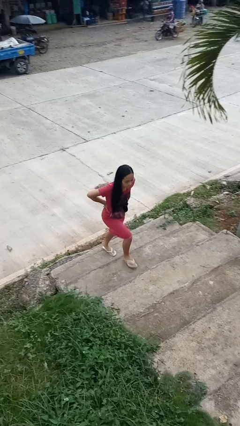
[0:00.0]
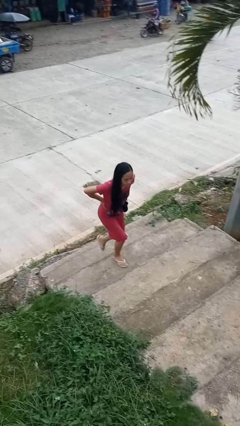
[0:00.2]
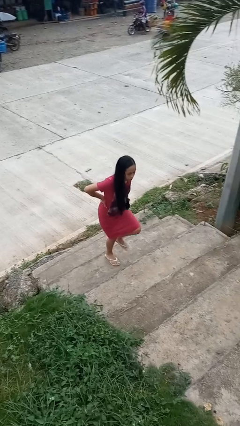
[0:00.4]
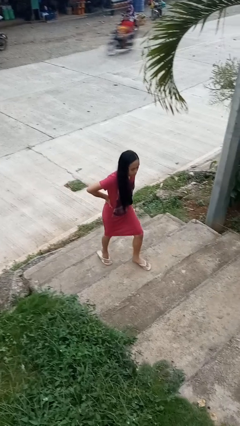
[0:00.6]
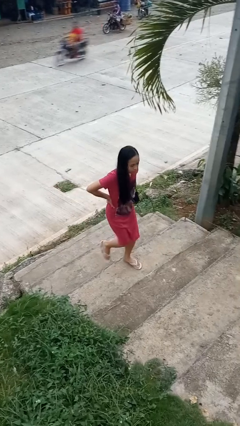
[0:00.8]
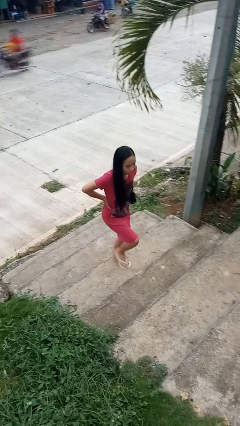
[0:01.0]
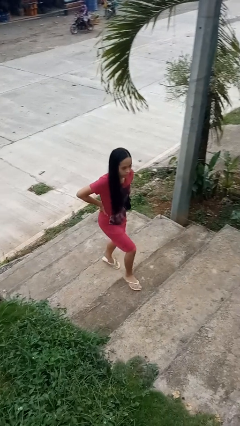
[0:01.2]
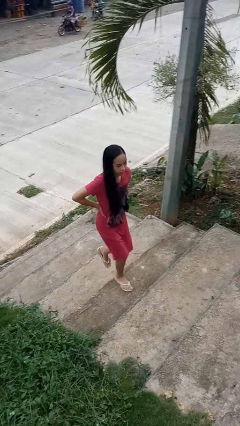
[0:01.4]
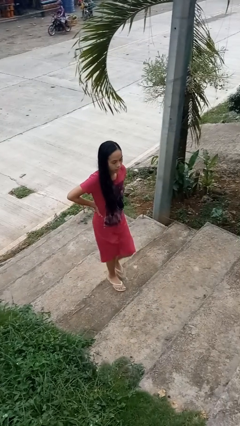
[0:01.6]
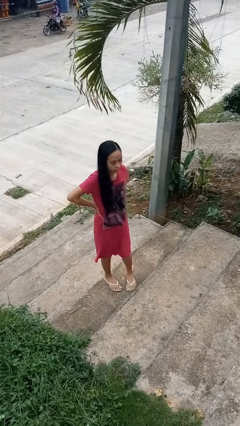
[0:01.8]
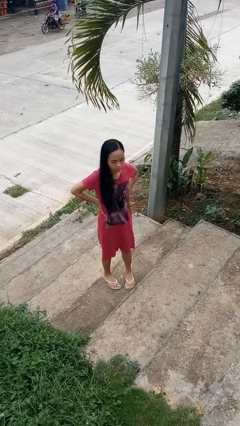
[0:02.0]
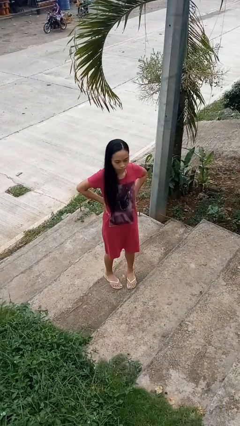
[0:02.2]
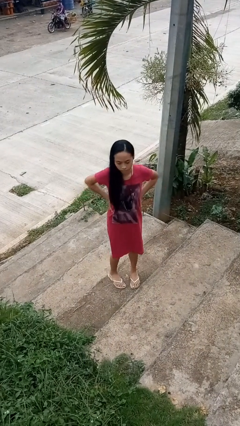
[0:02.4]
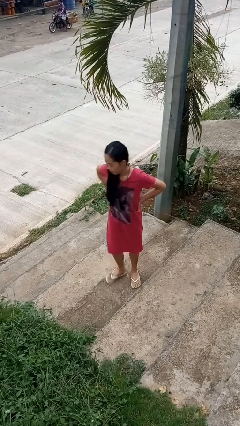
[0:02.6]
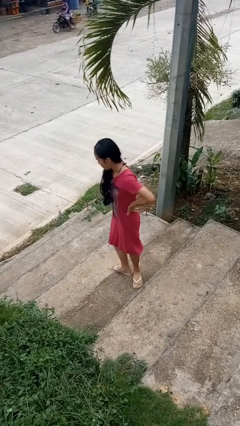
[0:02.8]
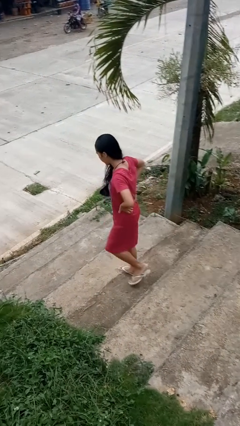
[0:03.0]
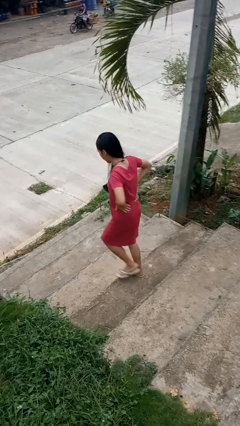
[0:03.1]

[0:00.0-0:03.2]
person climbs up stairs

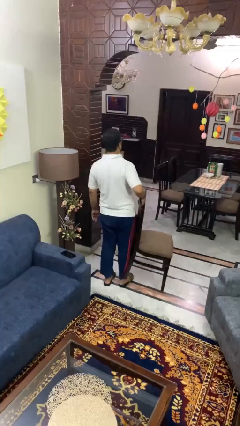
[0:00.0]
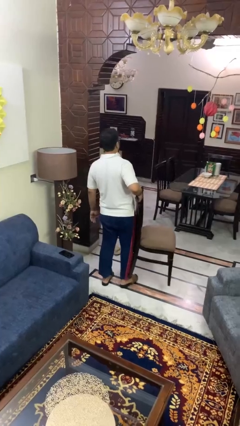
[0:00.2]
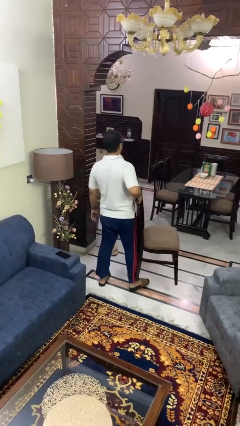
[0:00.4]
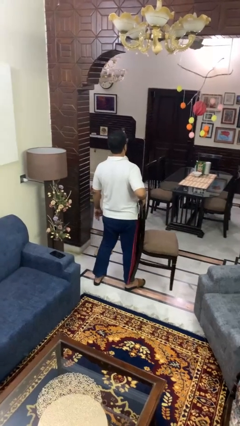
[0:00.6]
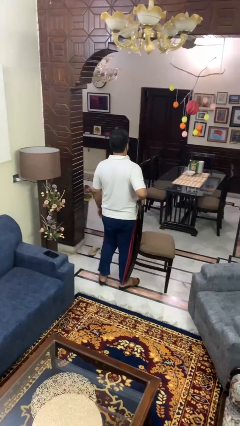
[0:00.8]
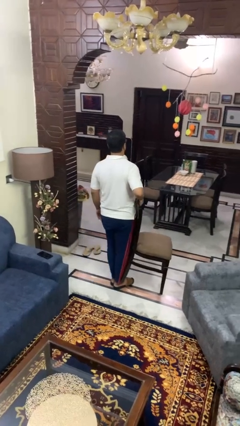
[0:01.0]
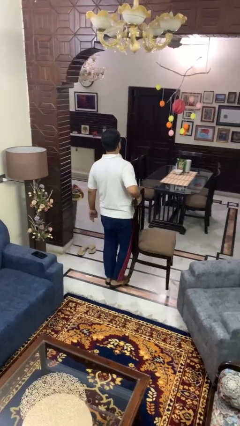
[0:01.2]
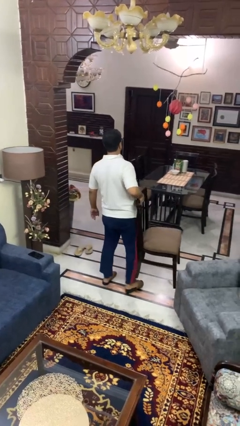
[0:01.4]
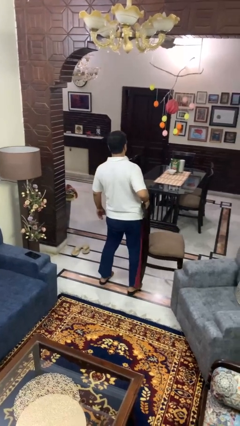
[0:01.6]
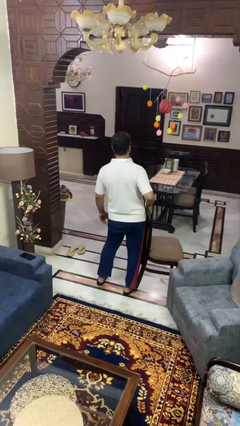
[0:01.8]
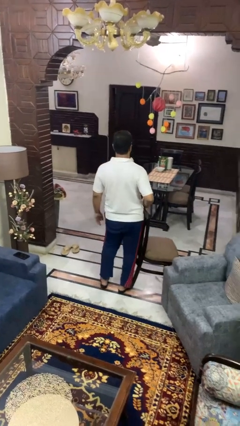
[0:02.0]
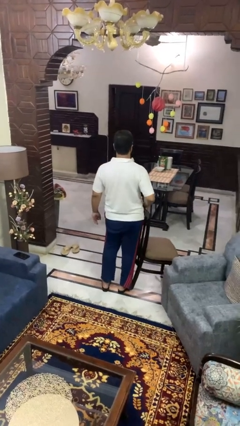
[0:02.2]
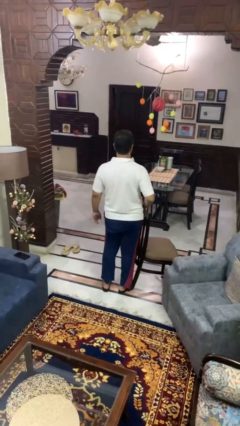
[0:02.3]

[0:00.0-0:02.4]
person carries furniture

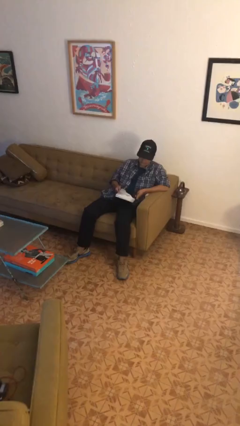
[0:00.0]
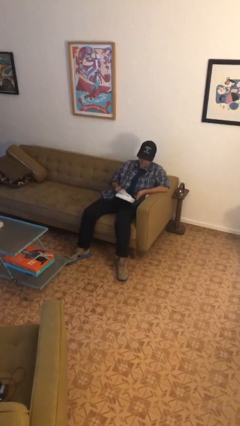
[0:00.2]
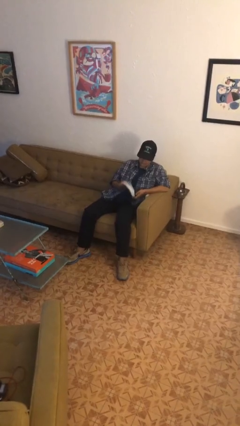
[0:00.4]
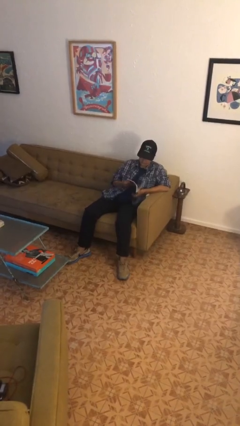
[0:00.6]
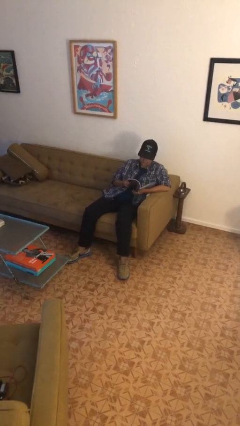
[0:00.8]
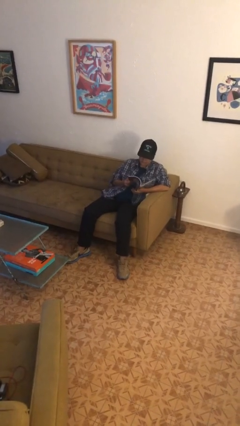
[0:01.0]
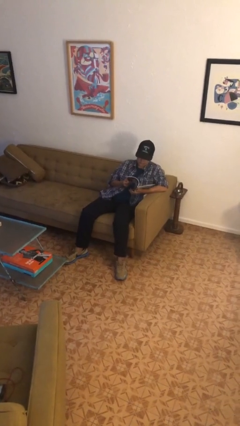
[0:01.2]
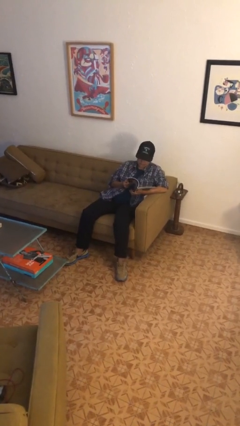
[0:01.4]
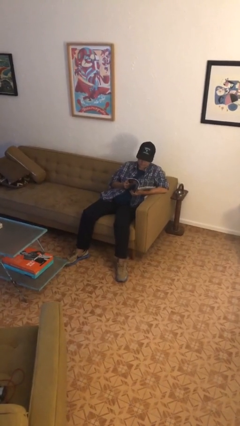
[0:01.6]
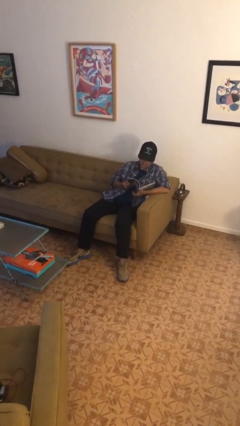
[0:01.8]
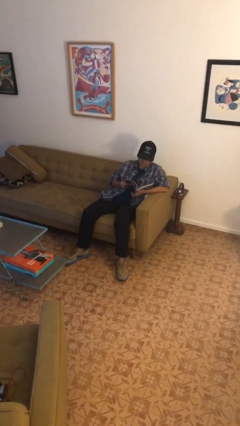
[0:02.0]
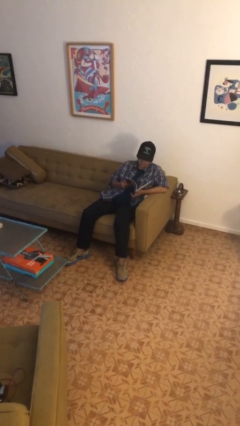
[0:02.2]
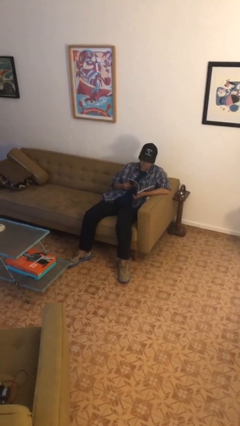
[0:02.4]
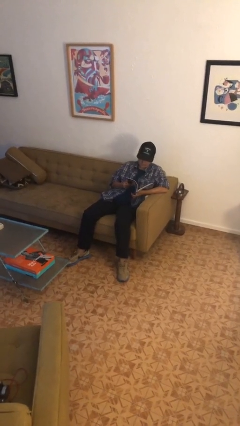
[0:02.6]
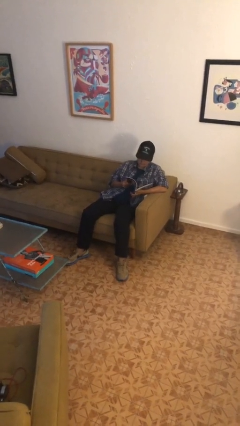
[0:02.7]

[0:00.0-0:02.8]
person reads magazine

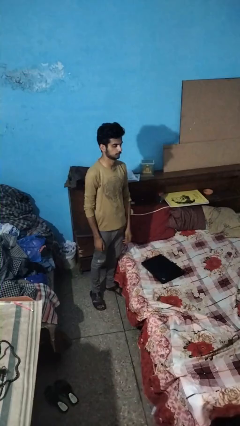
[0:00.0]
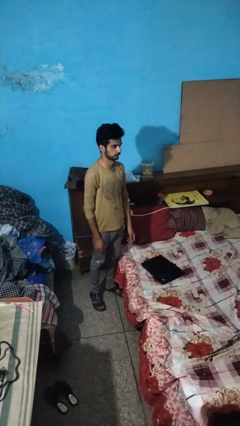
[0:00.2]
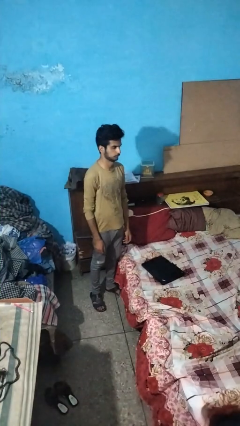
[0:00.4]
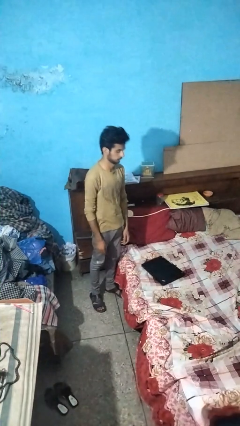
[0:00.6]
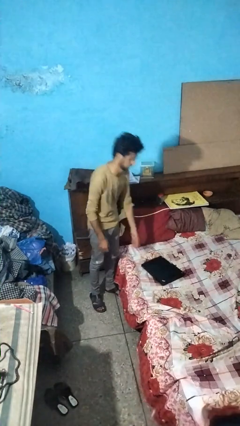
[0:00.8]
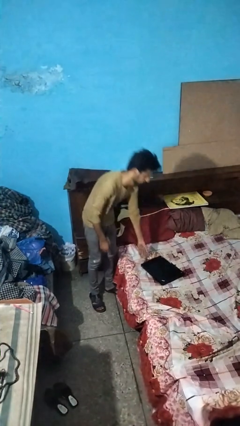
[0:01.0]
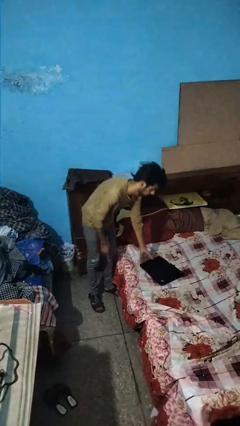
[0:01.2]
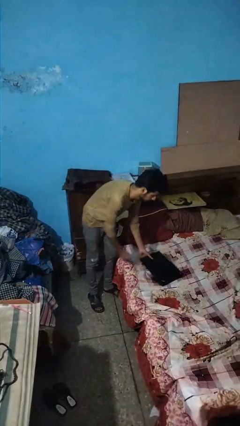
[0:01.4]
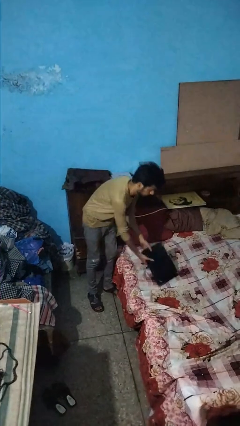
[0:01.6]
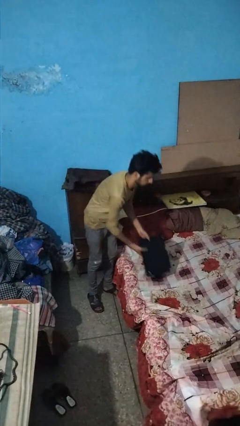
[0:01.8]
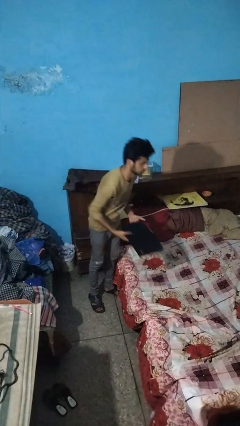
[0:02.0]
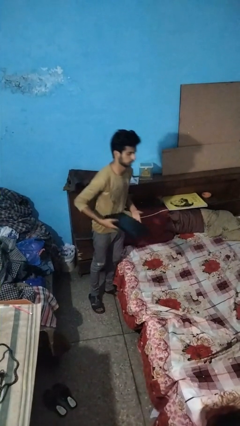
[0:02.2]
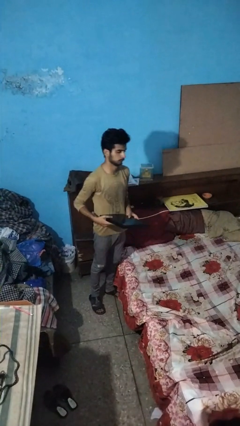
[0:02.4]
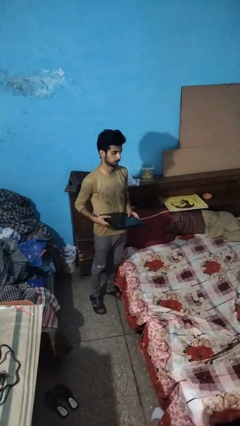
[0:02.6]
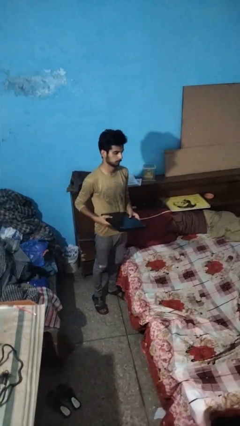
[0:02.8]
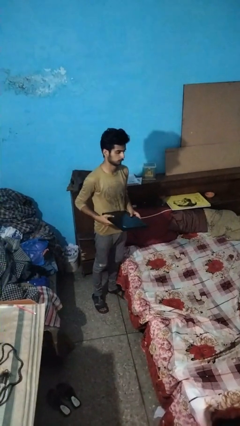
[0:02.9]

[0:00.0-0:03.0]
person picks up object from bed

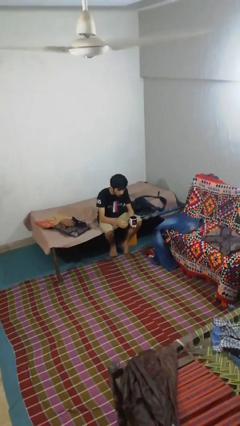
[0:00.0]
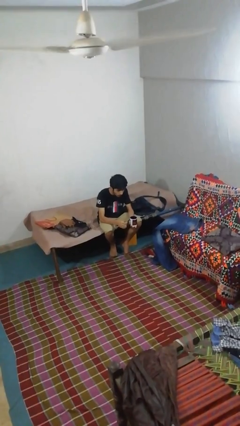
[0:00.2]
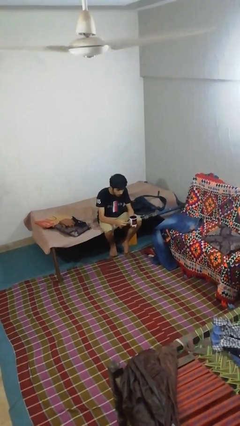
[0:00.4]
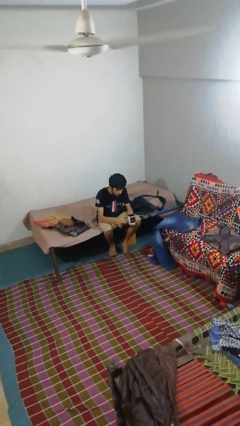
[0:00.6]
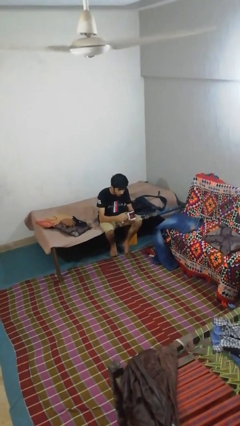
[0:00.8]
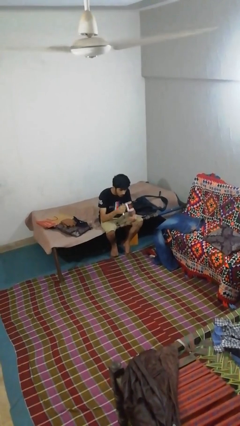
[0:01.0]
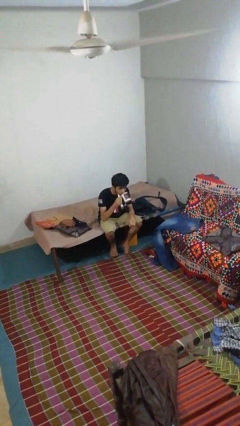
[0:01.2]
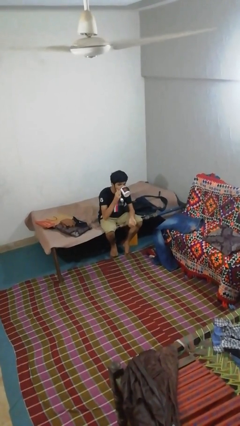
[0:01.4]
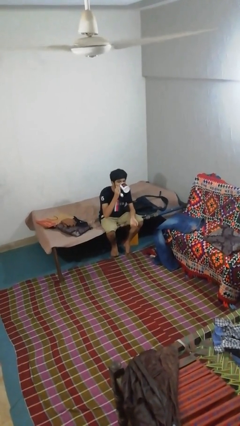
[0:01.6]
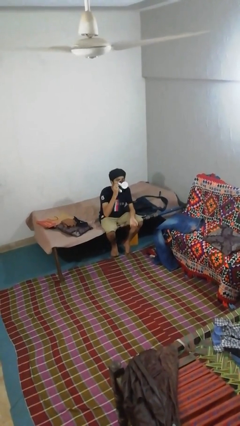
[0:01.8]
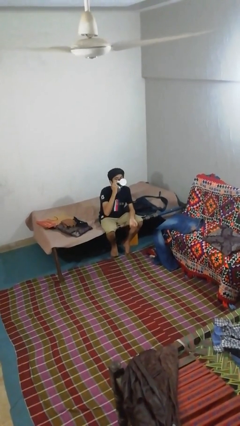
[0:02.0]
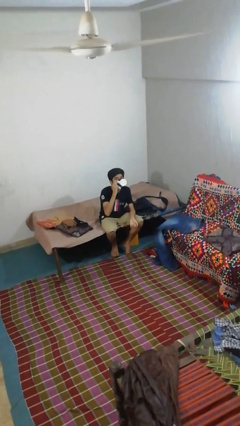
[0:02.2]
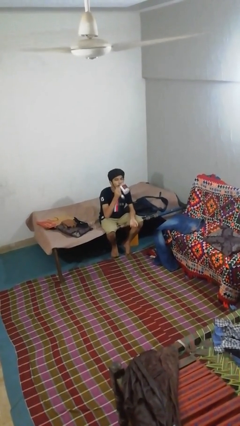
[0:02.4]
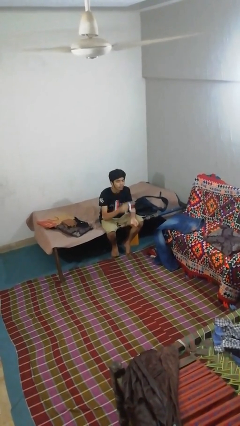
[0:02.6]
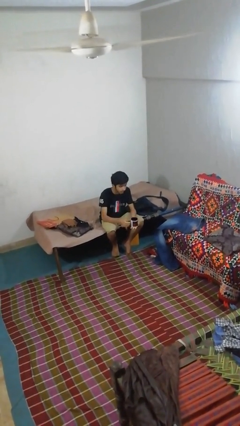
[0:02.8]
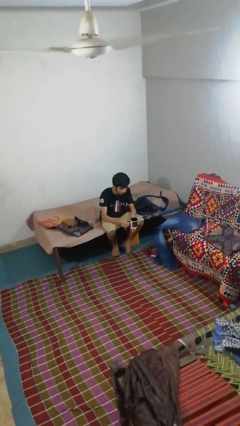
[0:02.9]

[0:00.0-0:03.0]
person drinks from mug

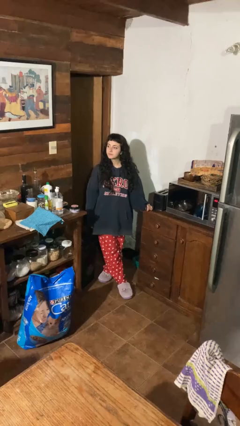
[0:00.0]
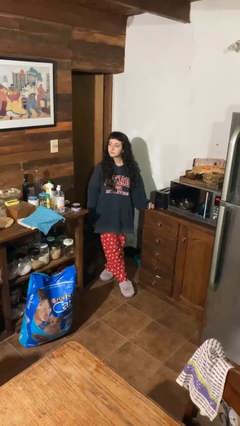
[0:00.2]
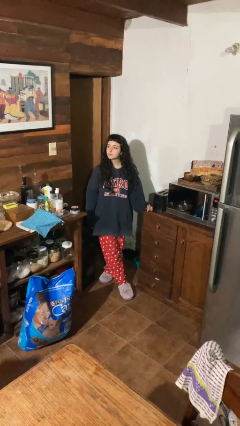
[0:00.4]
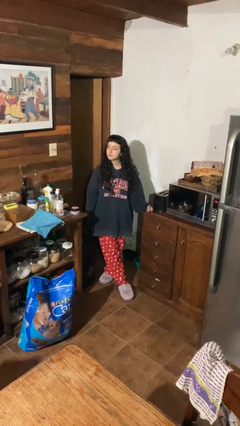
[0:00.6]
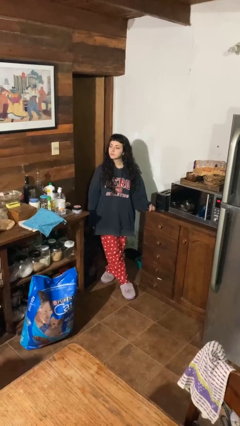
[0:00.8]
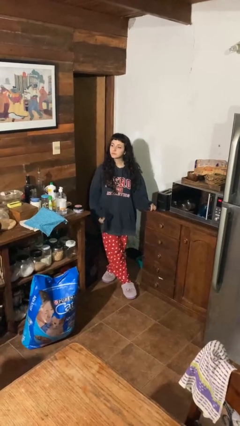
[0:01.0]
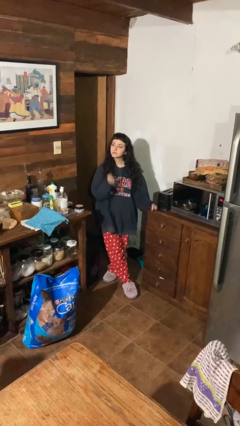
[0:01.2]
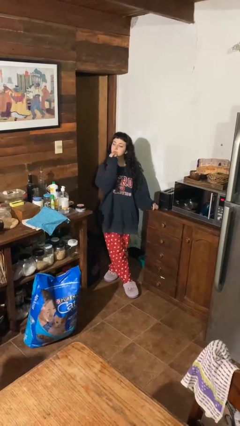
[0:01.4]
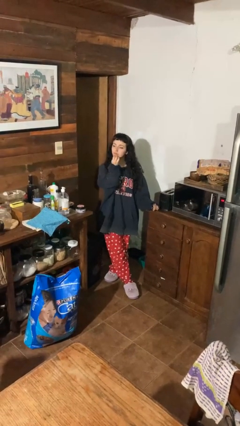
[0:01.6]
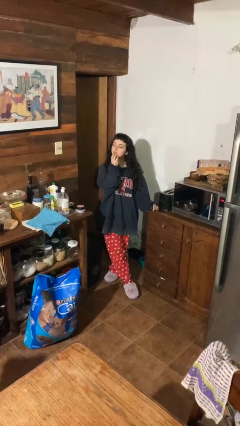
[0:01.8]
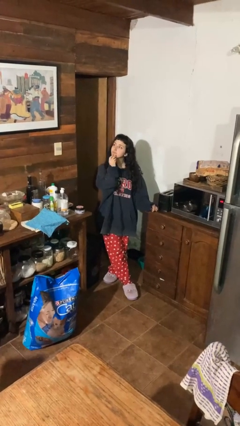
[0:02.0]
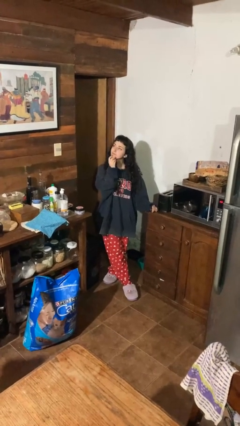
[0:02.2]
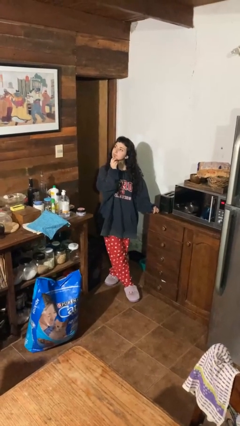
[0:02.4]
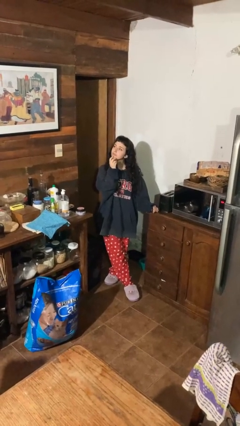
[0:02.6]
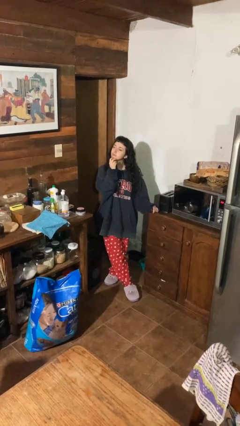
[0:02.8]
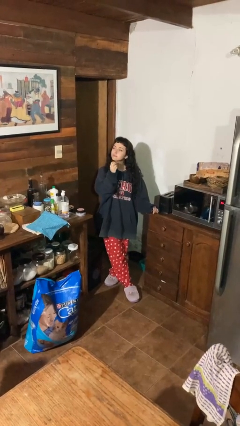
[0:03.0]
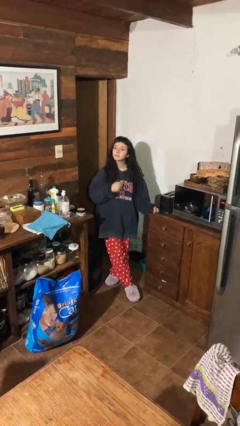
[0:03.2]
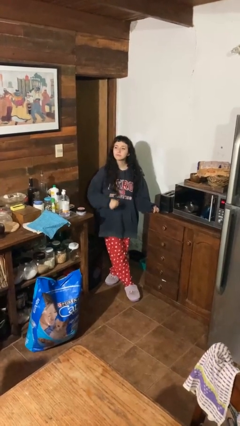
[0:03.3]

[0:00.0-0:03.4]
person strokes chin
